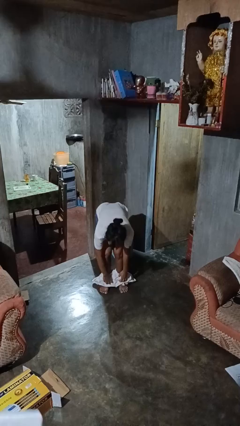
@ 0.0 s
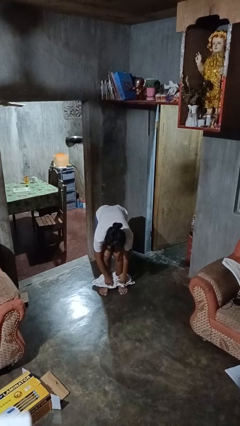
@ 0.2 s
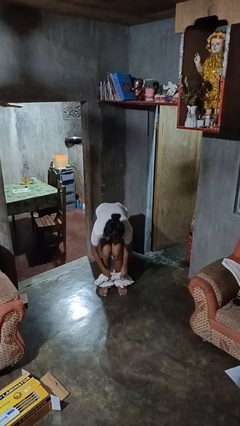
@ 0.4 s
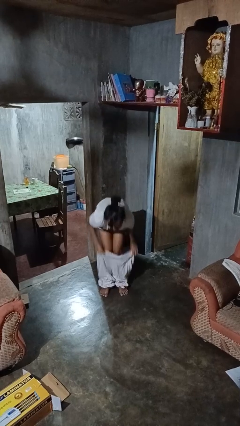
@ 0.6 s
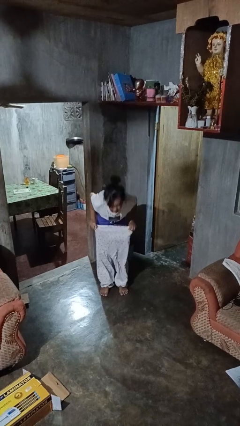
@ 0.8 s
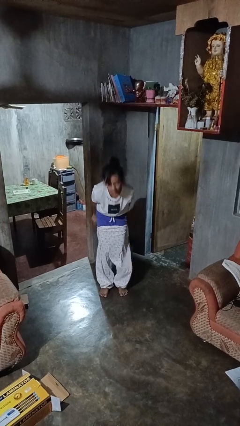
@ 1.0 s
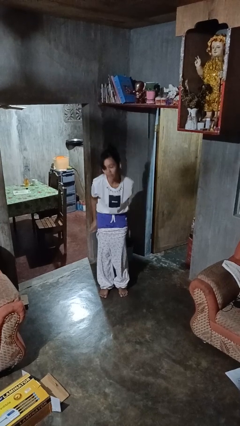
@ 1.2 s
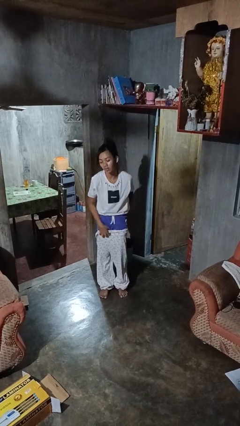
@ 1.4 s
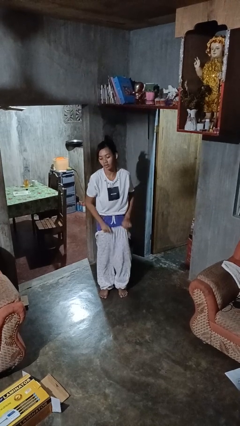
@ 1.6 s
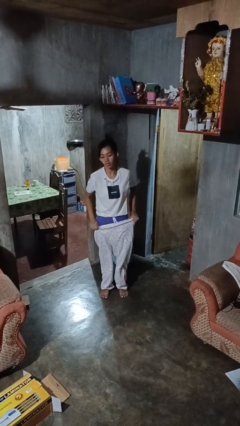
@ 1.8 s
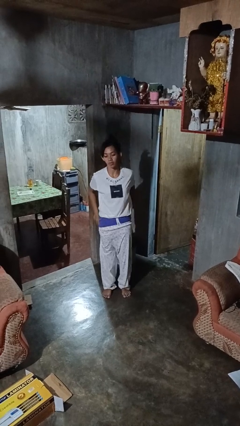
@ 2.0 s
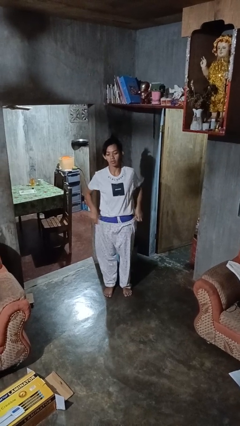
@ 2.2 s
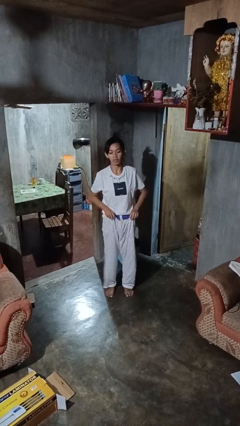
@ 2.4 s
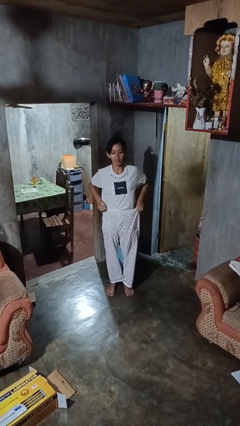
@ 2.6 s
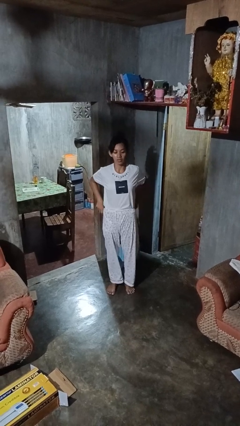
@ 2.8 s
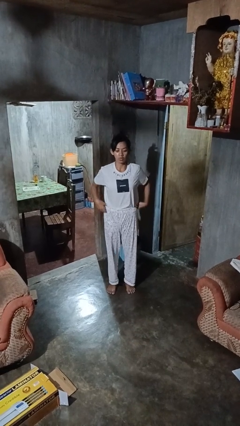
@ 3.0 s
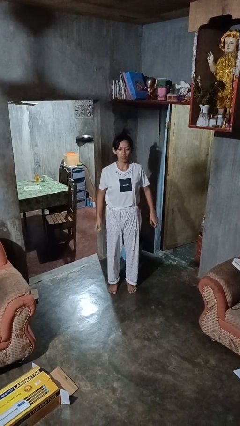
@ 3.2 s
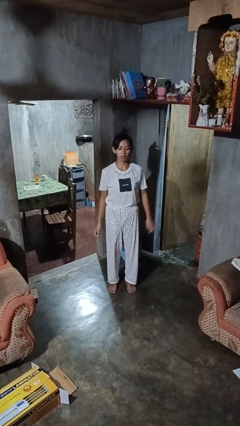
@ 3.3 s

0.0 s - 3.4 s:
person puts on pants

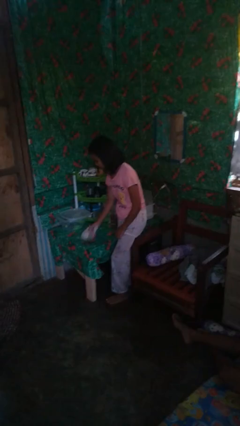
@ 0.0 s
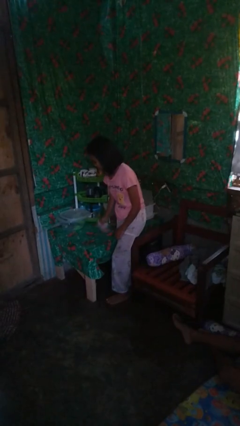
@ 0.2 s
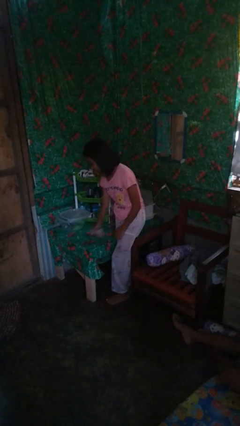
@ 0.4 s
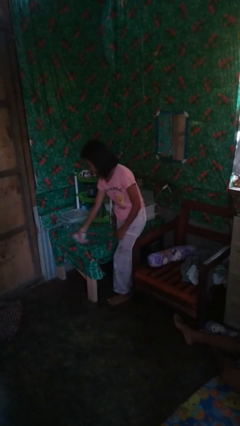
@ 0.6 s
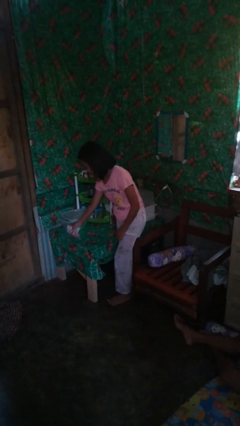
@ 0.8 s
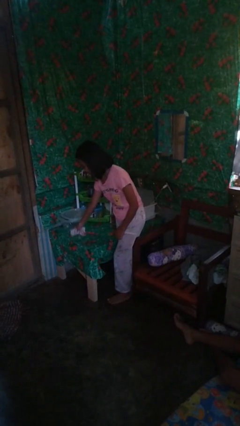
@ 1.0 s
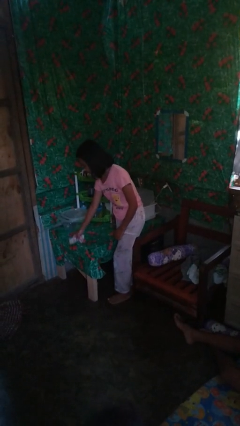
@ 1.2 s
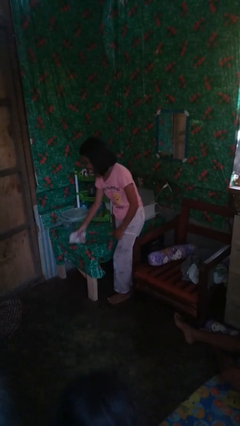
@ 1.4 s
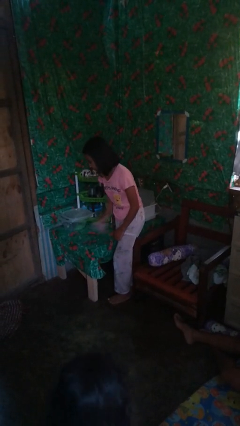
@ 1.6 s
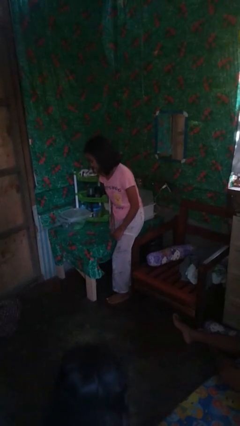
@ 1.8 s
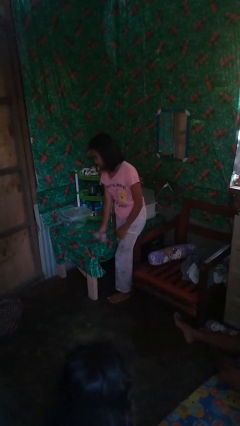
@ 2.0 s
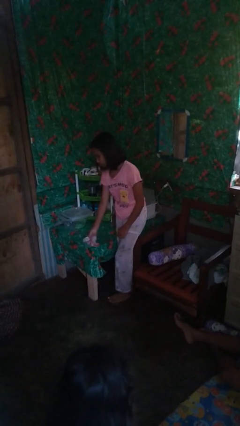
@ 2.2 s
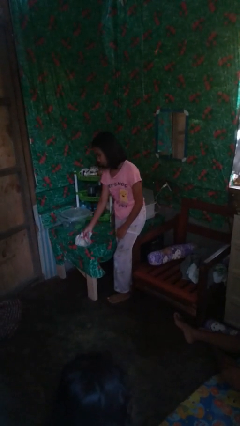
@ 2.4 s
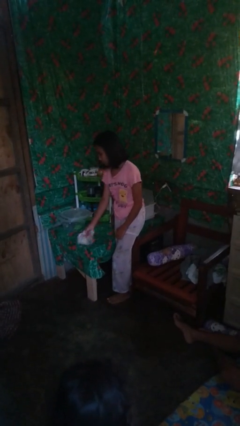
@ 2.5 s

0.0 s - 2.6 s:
person cleans table with rag

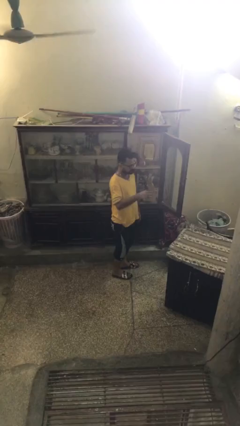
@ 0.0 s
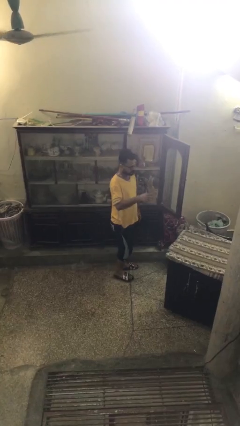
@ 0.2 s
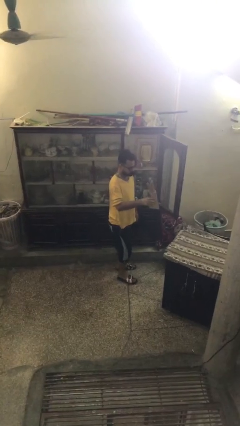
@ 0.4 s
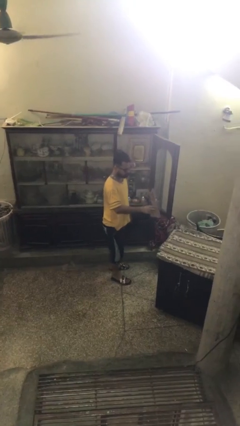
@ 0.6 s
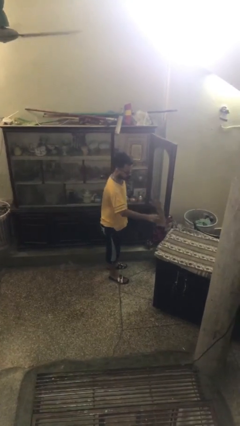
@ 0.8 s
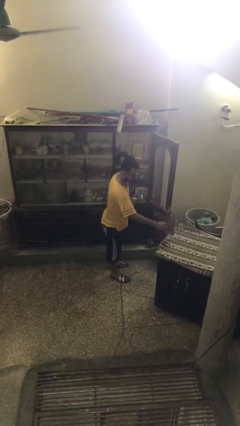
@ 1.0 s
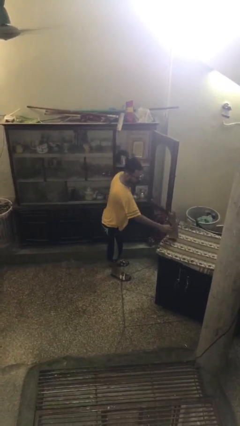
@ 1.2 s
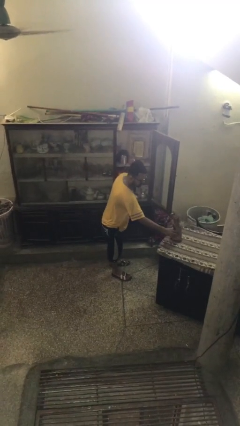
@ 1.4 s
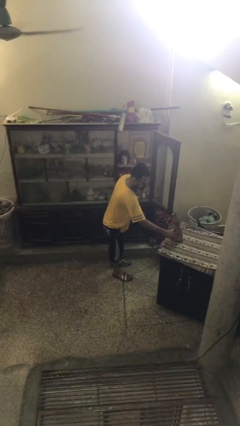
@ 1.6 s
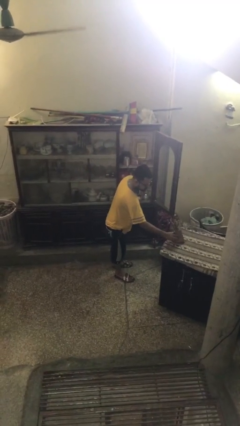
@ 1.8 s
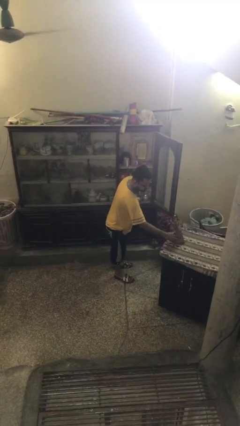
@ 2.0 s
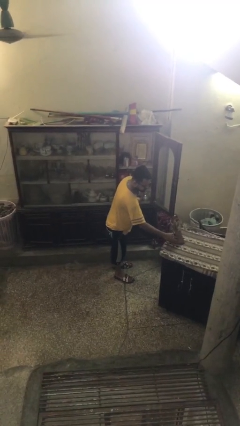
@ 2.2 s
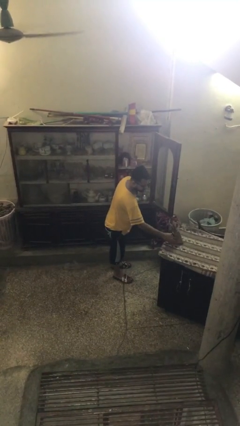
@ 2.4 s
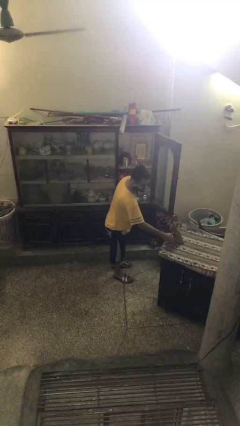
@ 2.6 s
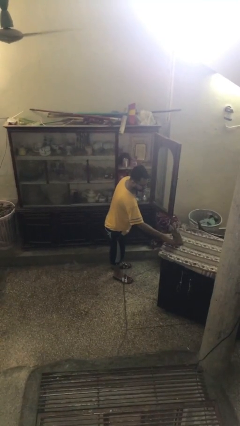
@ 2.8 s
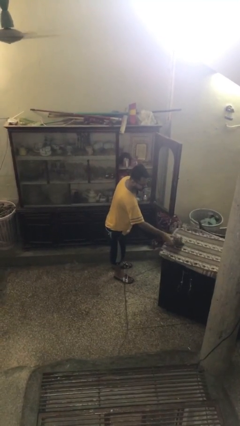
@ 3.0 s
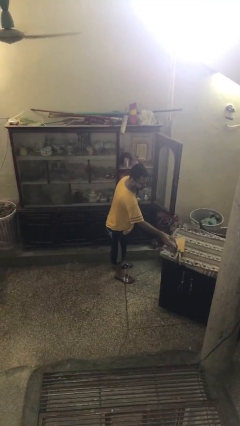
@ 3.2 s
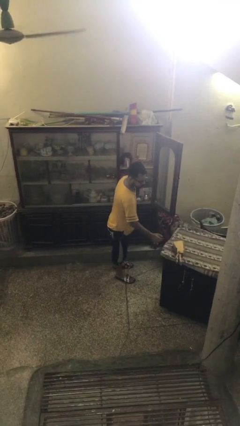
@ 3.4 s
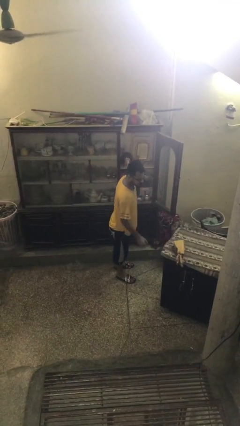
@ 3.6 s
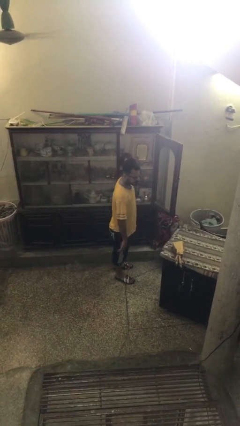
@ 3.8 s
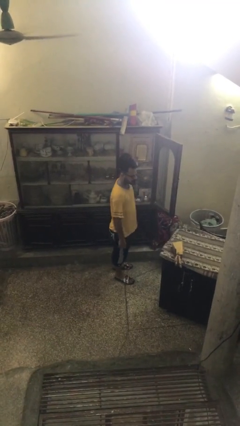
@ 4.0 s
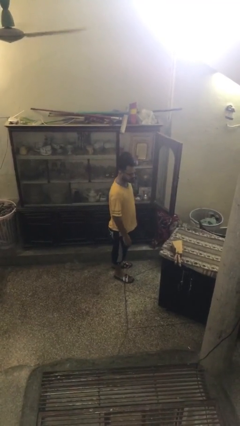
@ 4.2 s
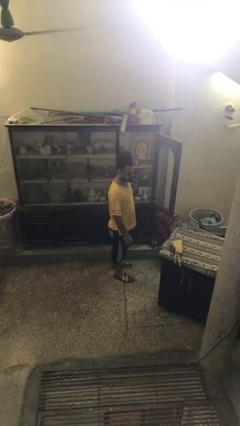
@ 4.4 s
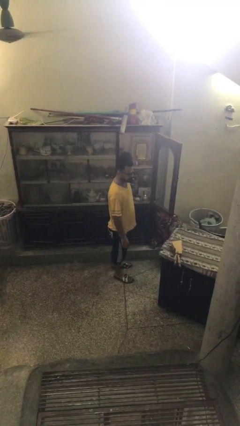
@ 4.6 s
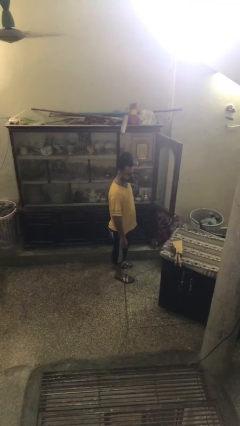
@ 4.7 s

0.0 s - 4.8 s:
person puts down object on table

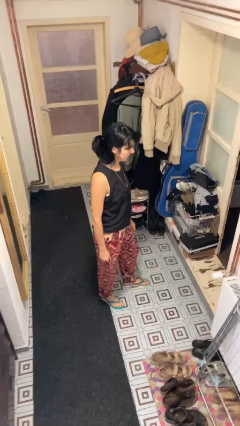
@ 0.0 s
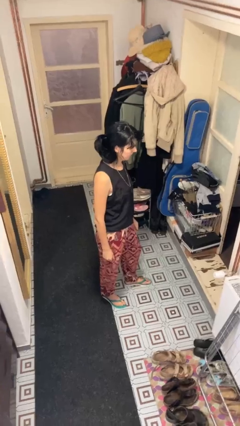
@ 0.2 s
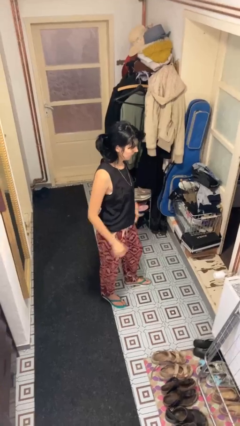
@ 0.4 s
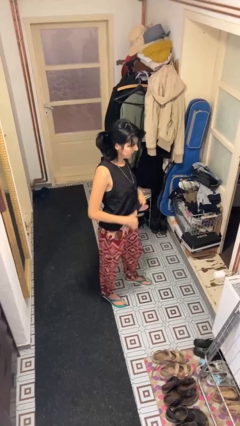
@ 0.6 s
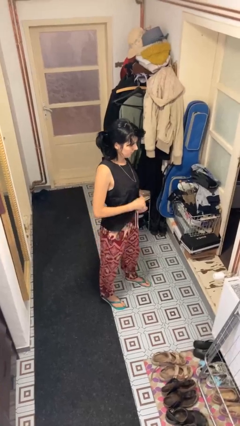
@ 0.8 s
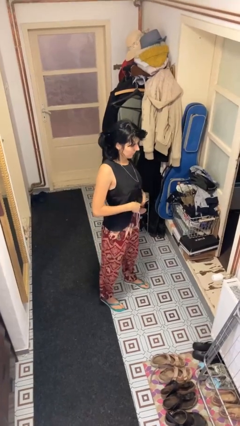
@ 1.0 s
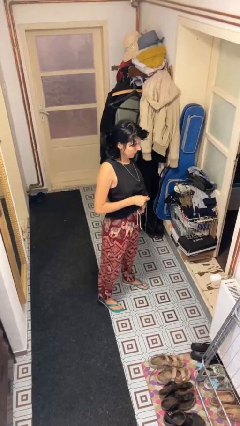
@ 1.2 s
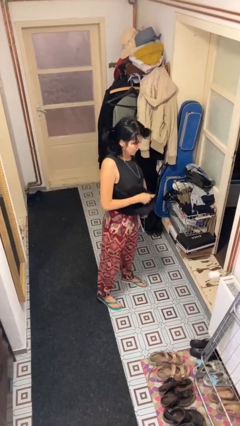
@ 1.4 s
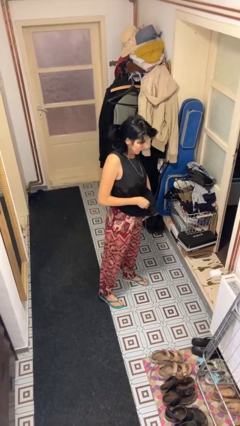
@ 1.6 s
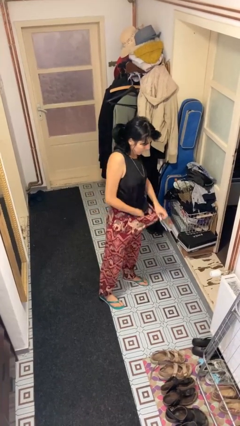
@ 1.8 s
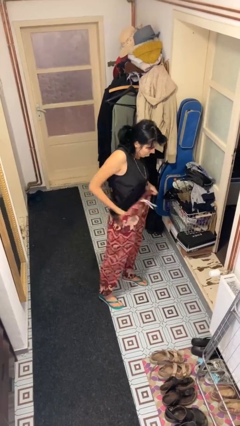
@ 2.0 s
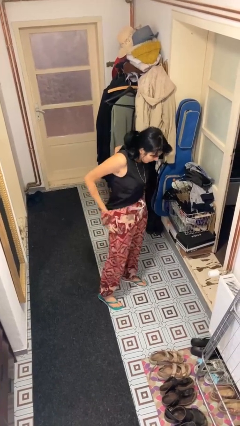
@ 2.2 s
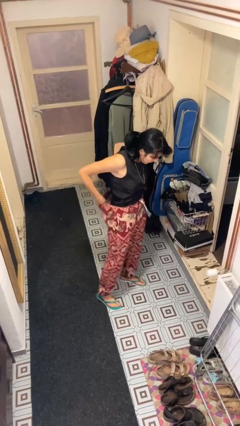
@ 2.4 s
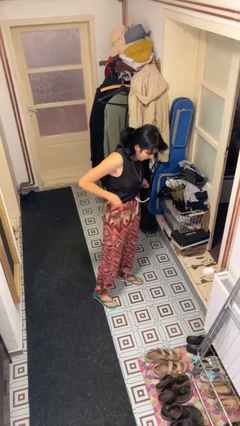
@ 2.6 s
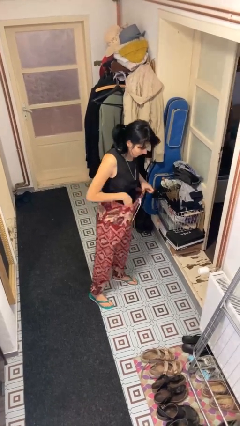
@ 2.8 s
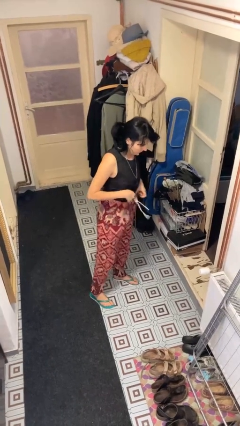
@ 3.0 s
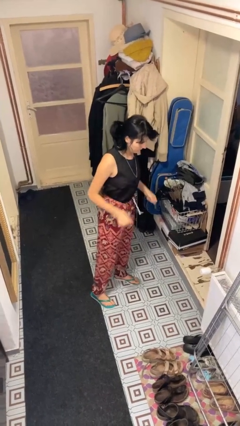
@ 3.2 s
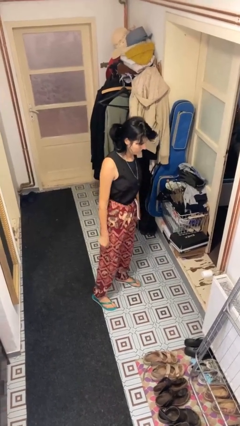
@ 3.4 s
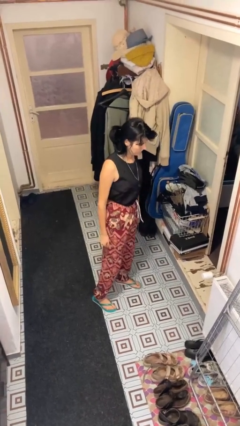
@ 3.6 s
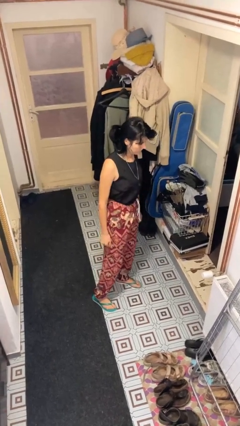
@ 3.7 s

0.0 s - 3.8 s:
person tucks in shirt

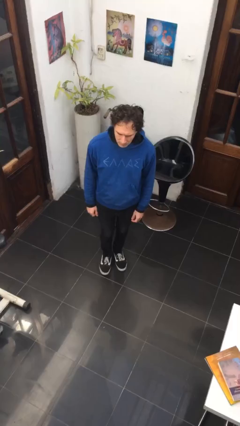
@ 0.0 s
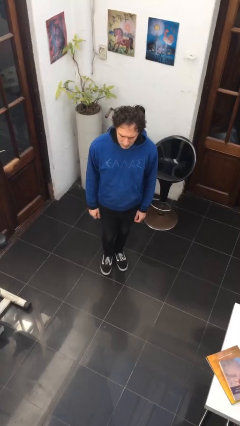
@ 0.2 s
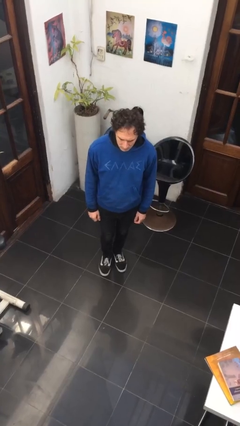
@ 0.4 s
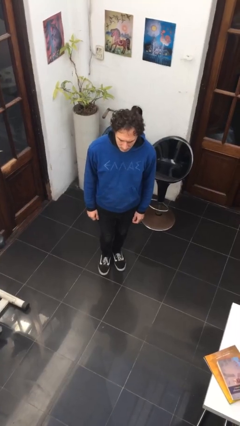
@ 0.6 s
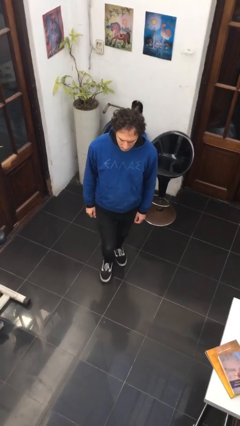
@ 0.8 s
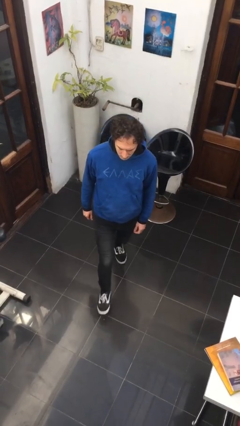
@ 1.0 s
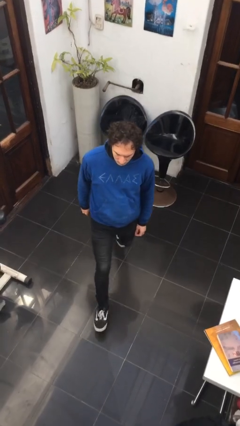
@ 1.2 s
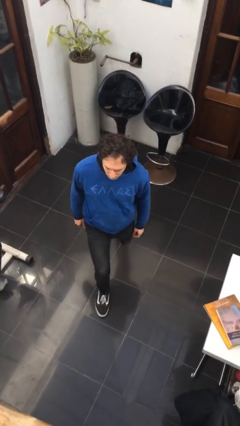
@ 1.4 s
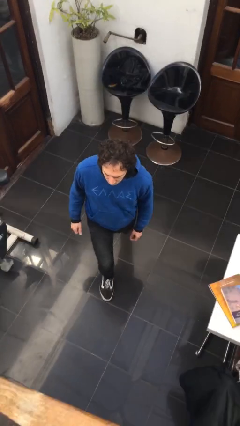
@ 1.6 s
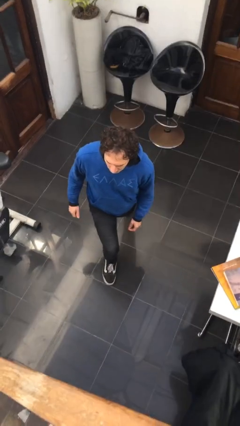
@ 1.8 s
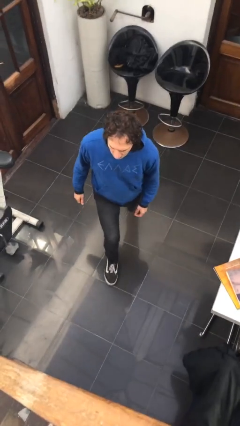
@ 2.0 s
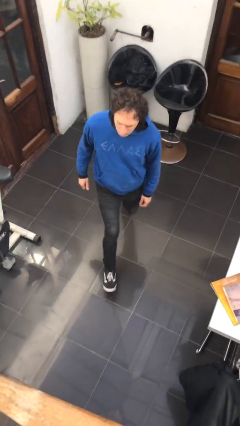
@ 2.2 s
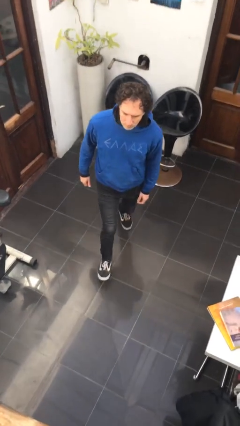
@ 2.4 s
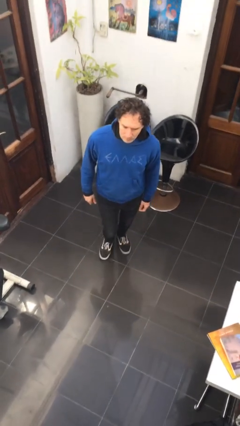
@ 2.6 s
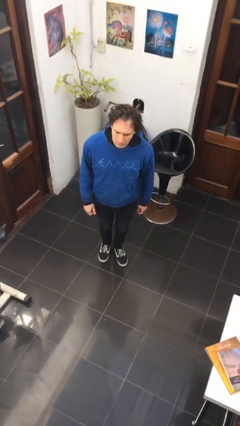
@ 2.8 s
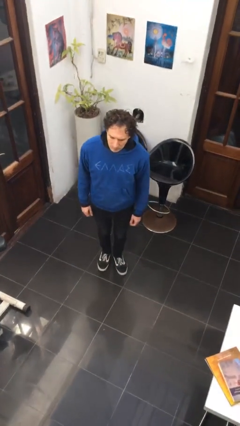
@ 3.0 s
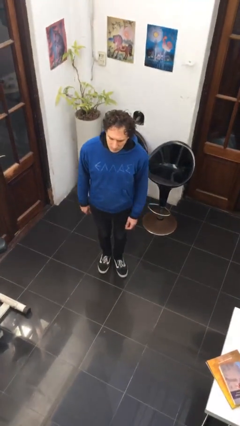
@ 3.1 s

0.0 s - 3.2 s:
person exercises with lunges
